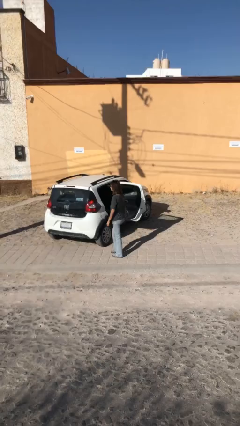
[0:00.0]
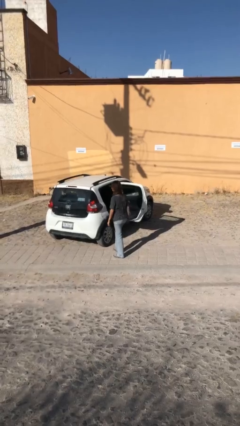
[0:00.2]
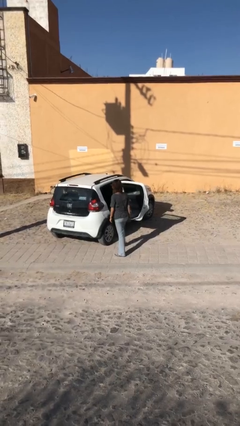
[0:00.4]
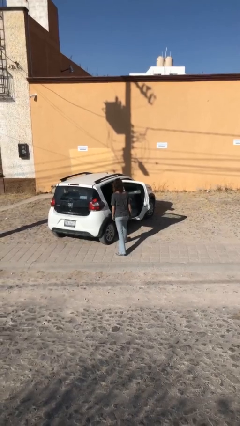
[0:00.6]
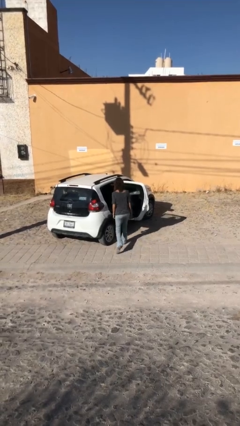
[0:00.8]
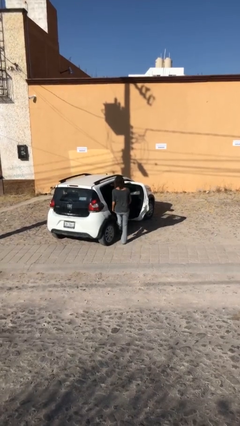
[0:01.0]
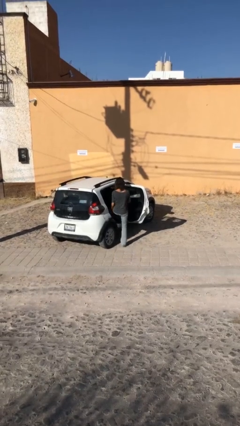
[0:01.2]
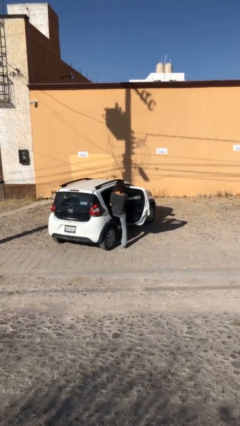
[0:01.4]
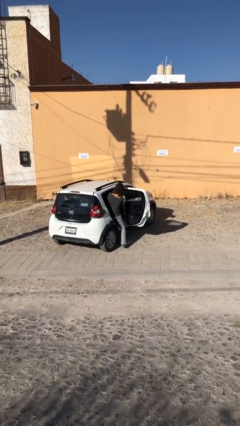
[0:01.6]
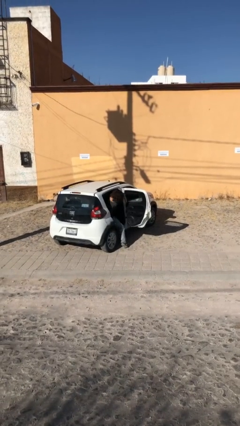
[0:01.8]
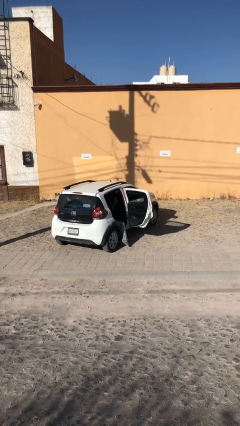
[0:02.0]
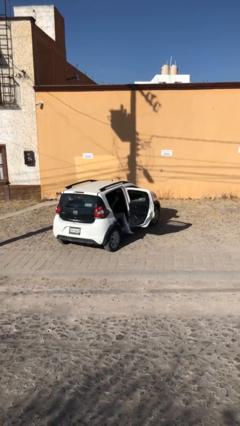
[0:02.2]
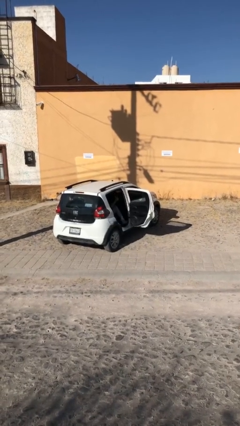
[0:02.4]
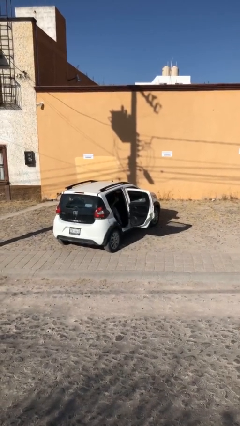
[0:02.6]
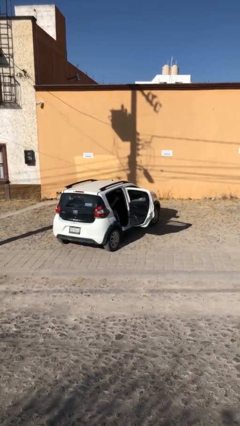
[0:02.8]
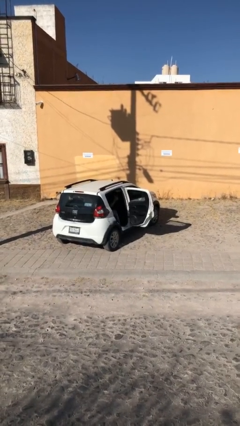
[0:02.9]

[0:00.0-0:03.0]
person enters car

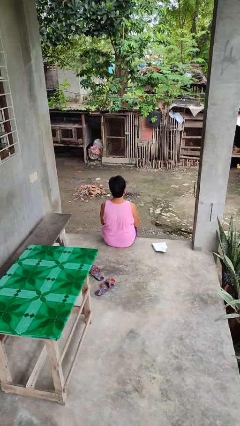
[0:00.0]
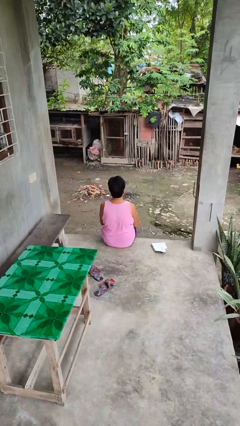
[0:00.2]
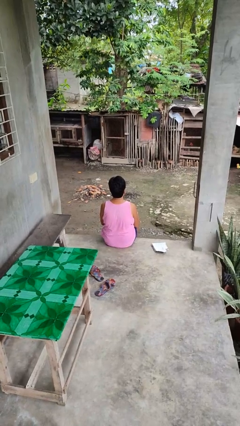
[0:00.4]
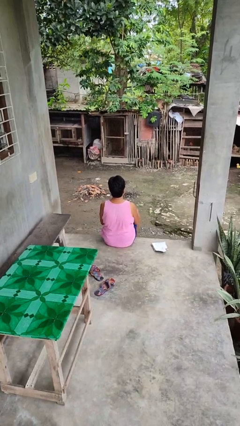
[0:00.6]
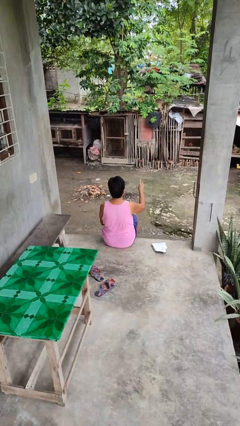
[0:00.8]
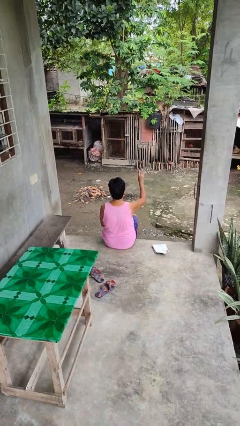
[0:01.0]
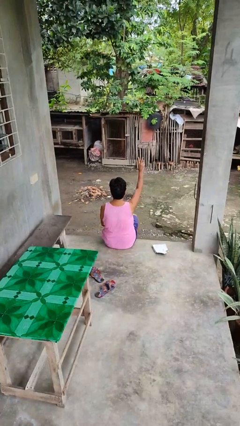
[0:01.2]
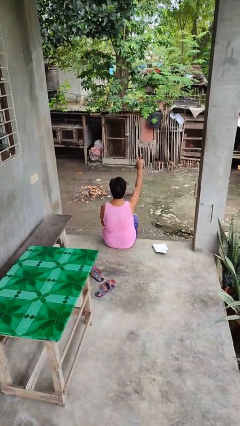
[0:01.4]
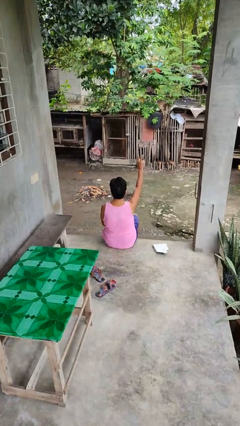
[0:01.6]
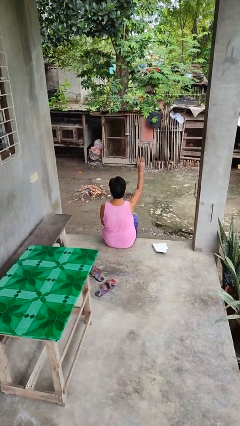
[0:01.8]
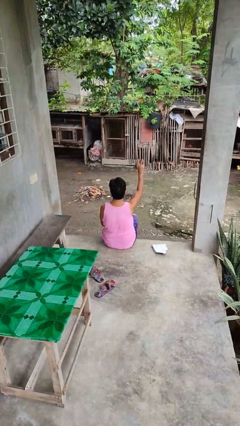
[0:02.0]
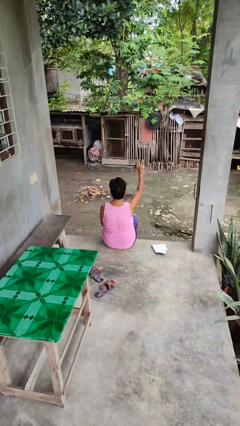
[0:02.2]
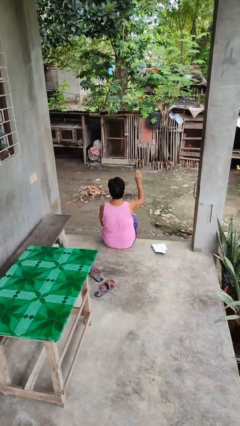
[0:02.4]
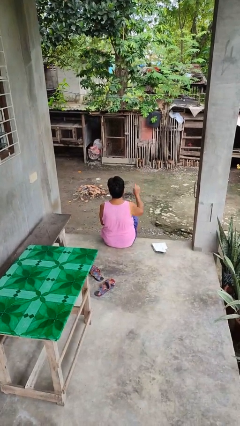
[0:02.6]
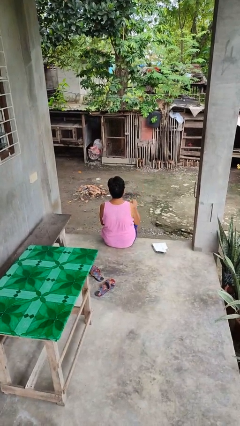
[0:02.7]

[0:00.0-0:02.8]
person gestures peace

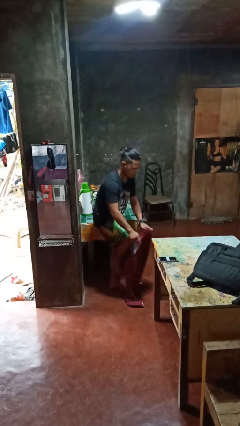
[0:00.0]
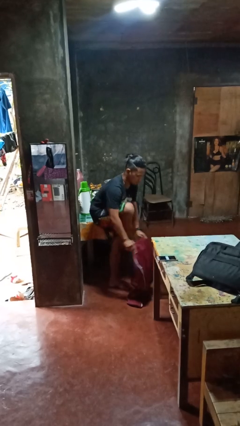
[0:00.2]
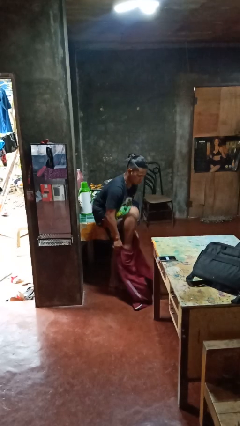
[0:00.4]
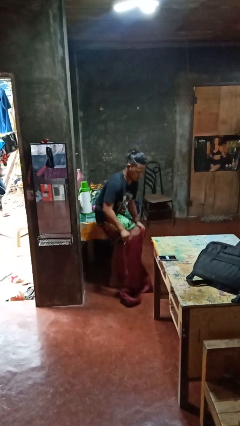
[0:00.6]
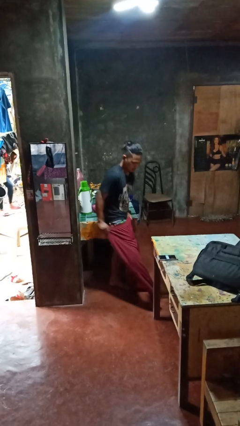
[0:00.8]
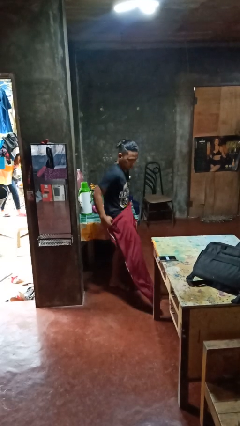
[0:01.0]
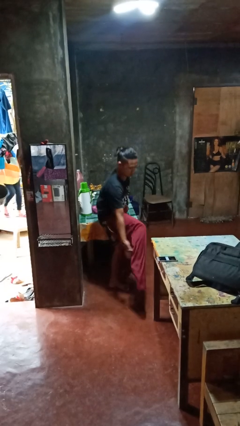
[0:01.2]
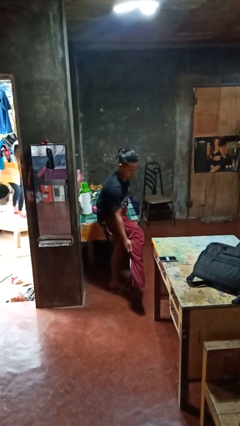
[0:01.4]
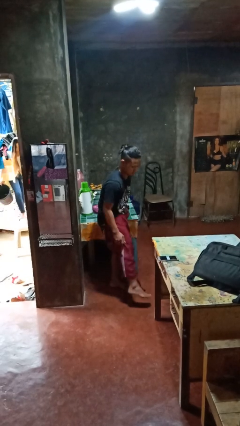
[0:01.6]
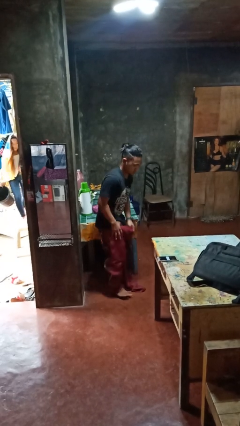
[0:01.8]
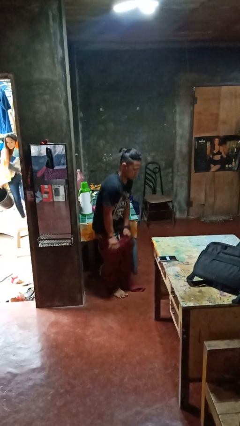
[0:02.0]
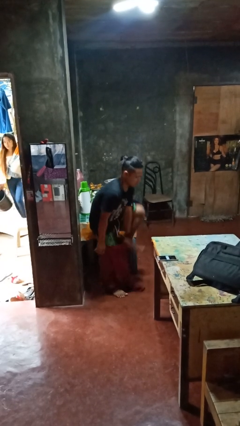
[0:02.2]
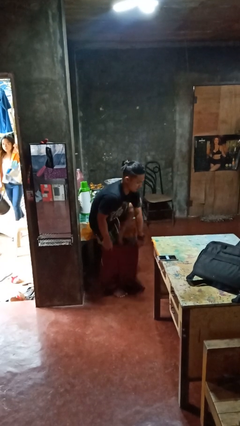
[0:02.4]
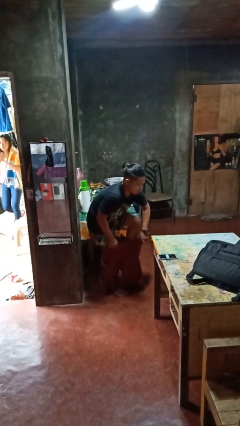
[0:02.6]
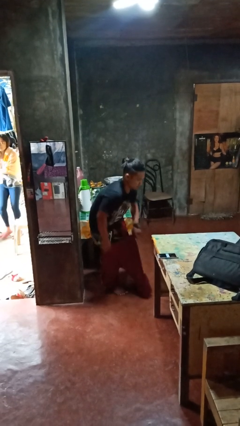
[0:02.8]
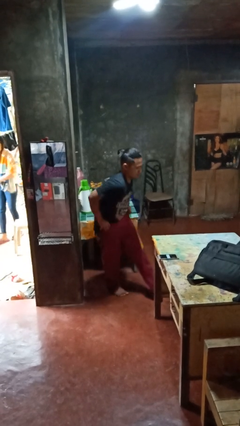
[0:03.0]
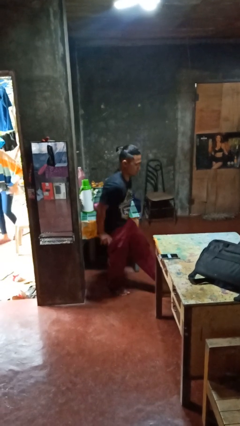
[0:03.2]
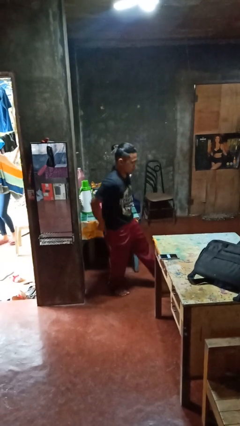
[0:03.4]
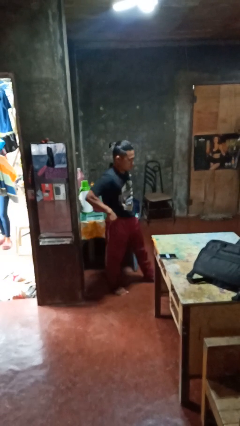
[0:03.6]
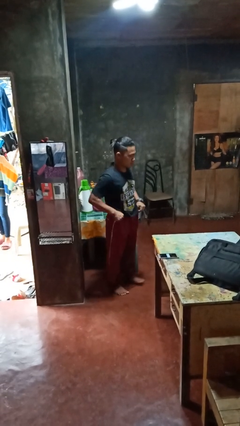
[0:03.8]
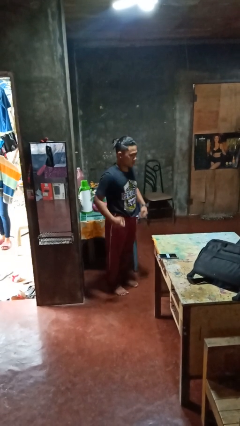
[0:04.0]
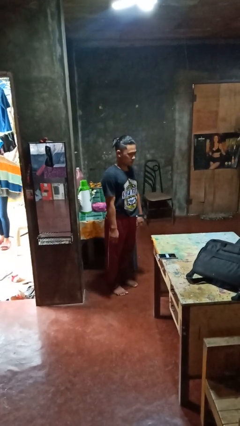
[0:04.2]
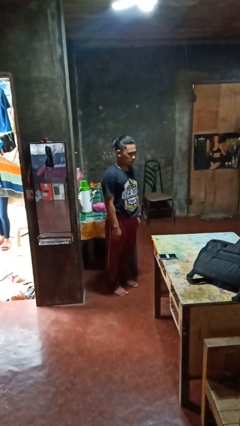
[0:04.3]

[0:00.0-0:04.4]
person puts on pants

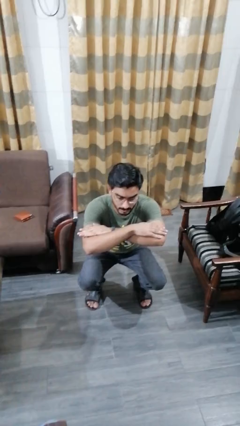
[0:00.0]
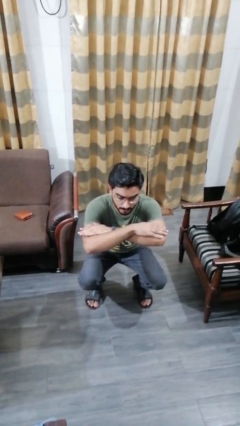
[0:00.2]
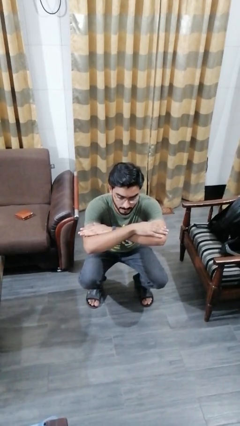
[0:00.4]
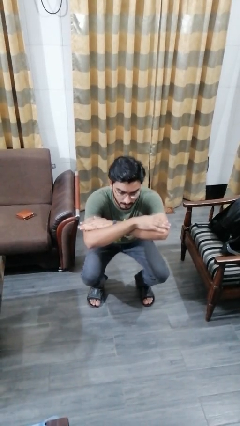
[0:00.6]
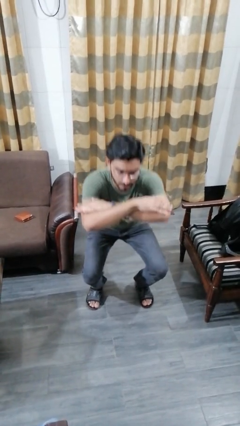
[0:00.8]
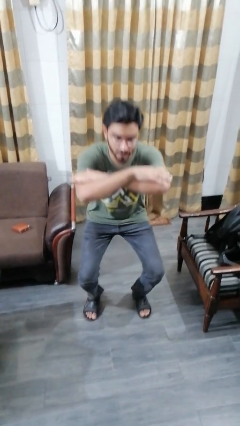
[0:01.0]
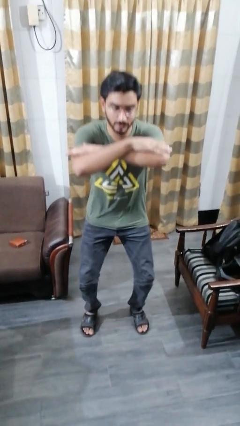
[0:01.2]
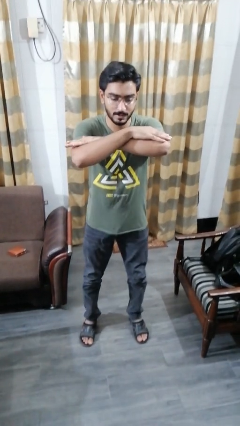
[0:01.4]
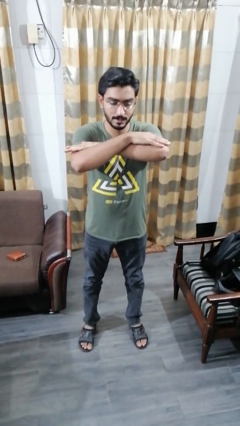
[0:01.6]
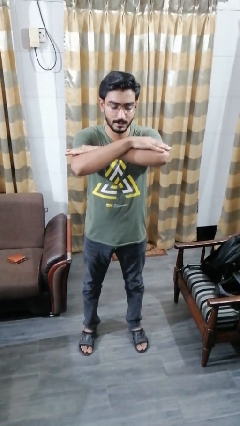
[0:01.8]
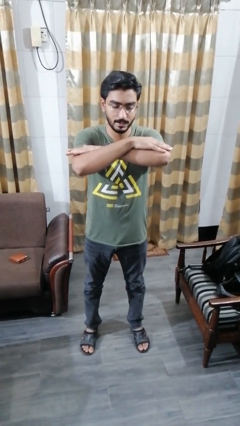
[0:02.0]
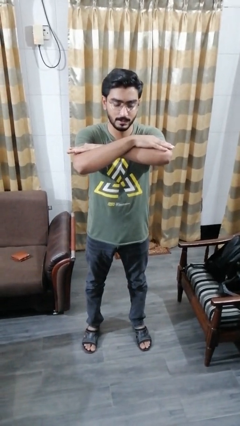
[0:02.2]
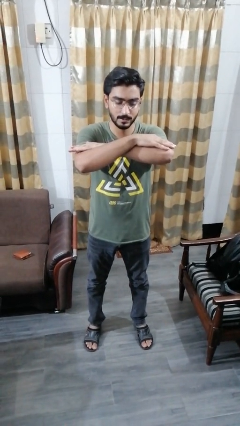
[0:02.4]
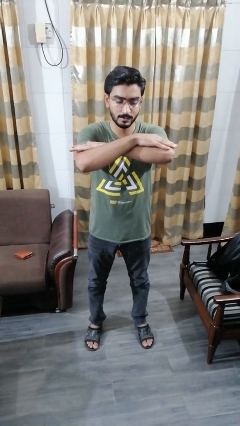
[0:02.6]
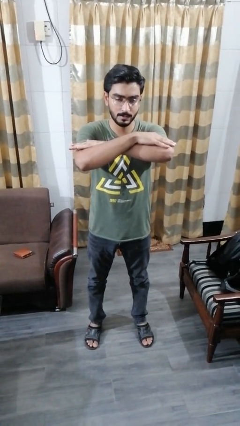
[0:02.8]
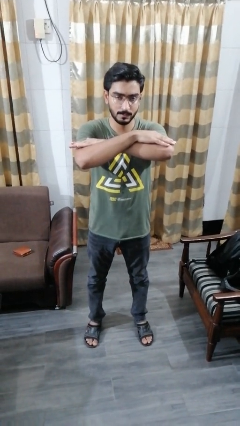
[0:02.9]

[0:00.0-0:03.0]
person stands up

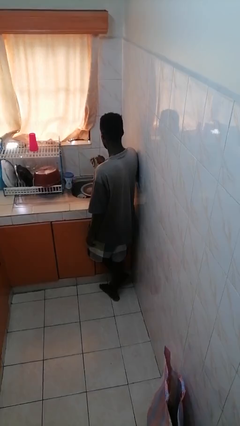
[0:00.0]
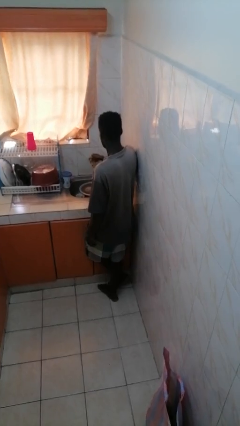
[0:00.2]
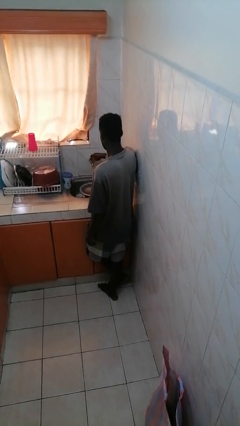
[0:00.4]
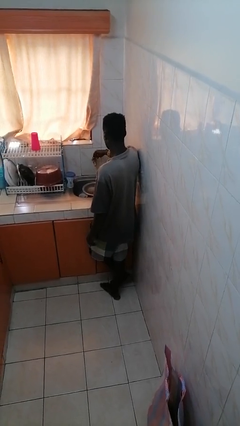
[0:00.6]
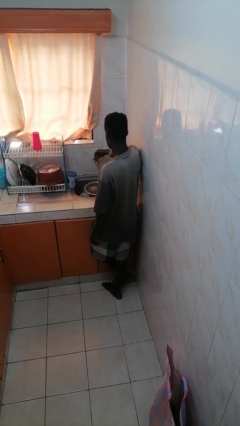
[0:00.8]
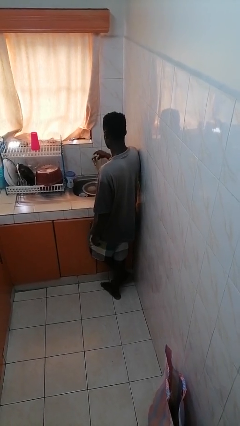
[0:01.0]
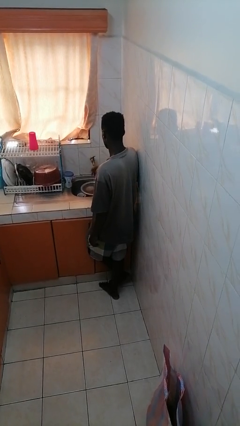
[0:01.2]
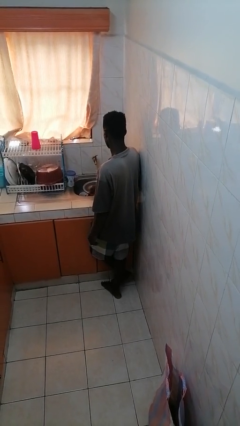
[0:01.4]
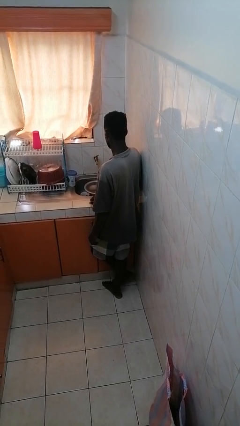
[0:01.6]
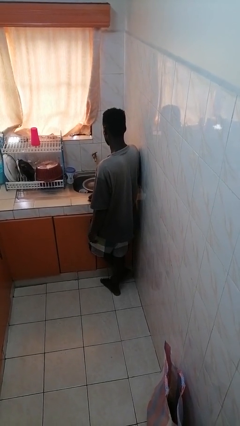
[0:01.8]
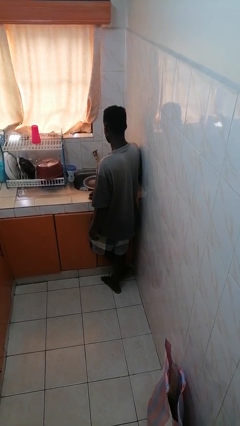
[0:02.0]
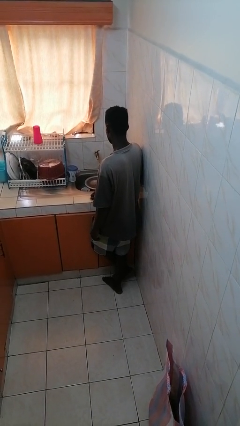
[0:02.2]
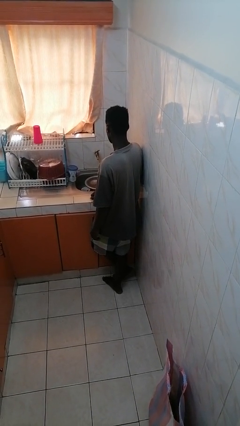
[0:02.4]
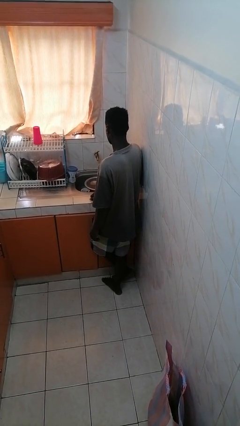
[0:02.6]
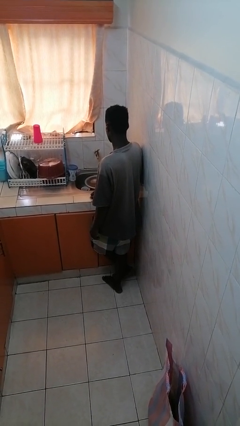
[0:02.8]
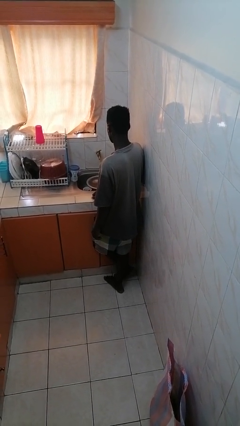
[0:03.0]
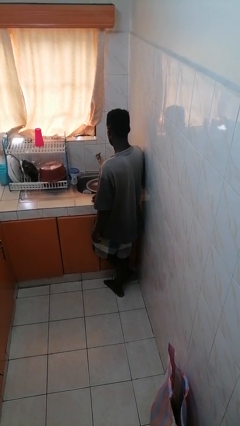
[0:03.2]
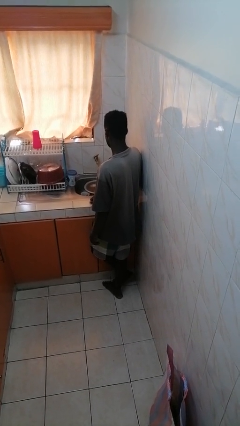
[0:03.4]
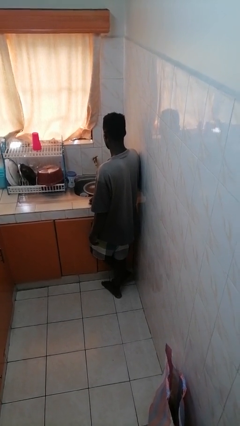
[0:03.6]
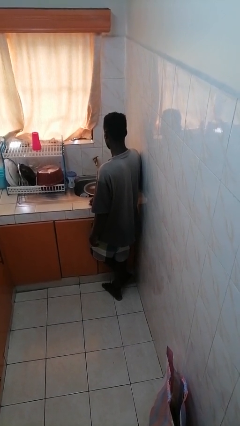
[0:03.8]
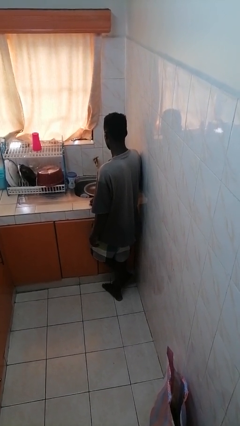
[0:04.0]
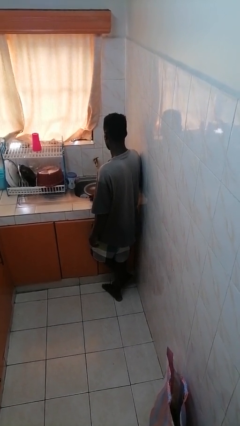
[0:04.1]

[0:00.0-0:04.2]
person turns on faucet

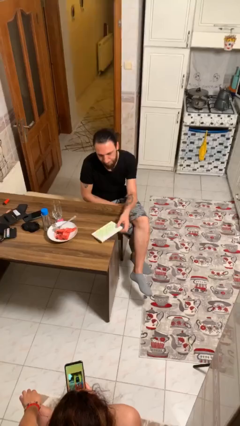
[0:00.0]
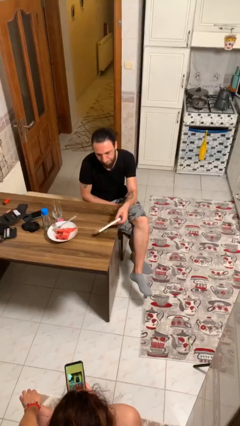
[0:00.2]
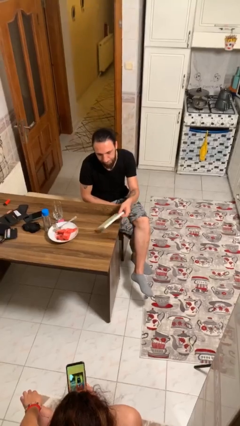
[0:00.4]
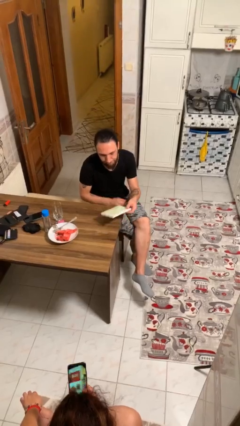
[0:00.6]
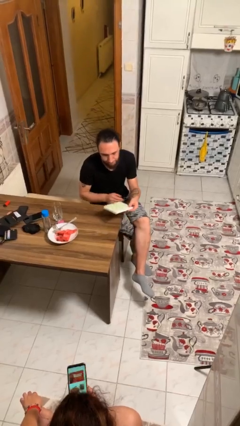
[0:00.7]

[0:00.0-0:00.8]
person picks up object from table
